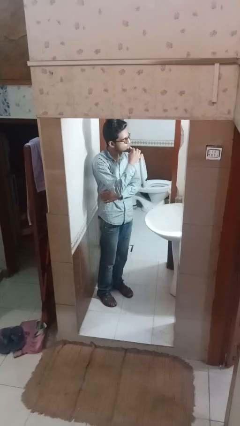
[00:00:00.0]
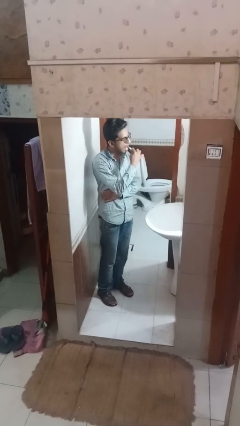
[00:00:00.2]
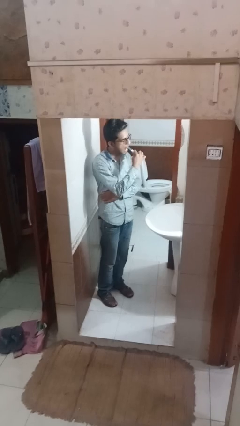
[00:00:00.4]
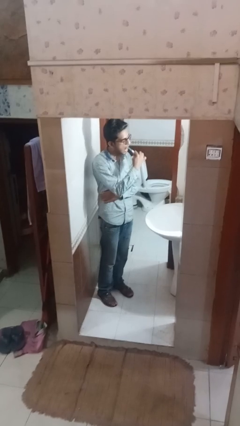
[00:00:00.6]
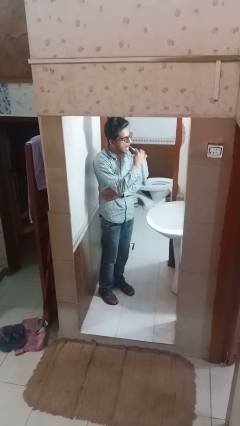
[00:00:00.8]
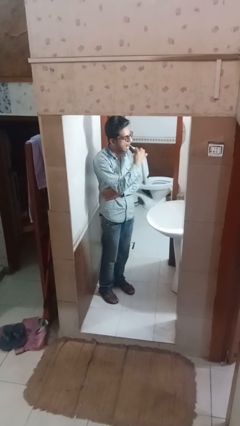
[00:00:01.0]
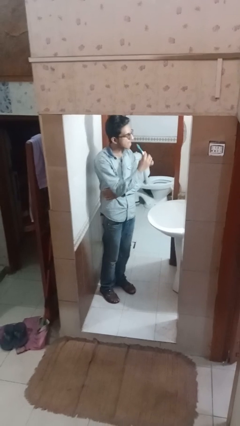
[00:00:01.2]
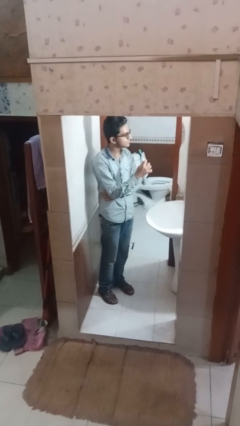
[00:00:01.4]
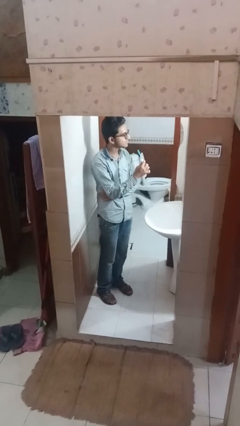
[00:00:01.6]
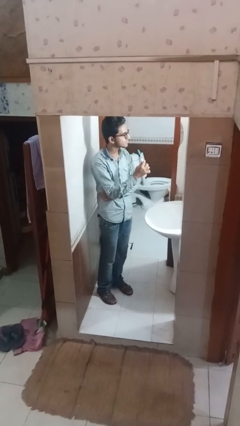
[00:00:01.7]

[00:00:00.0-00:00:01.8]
person brushes teeth

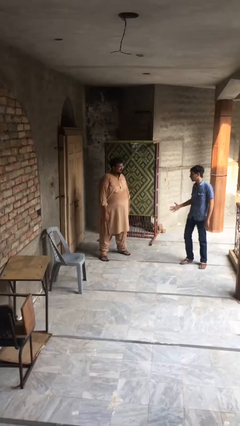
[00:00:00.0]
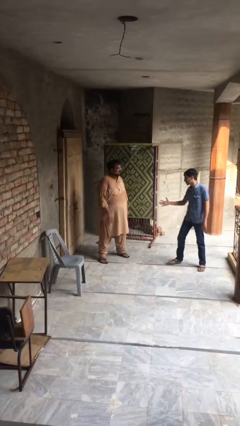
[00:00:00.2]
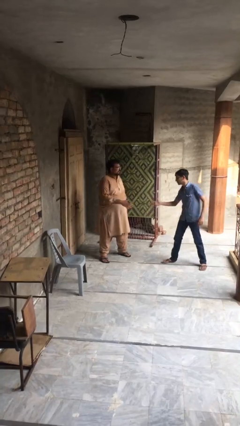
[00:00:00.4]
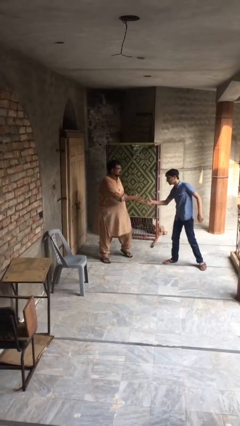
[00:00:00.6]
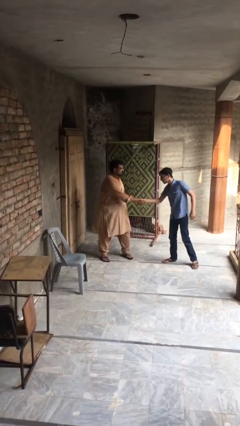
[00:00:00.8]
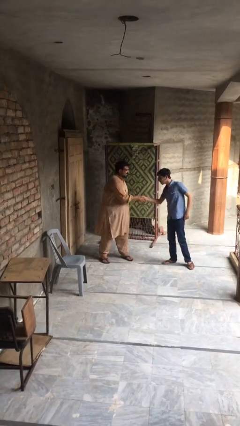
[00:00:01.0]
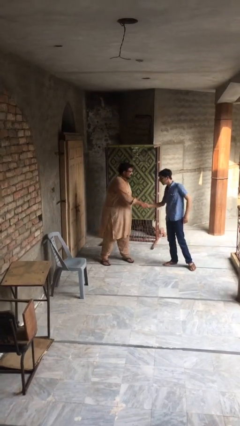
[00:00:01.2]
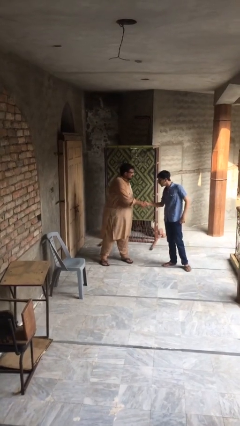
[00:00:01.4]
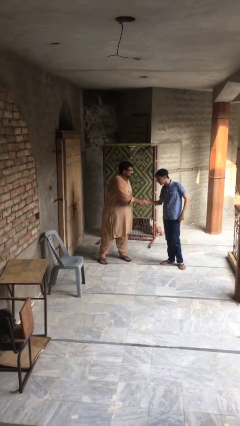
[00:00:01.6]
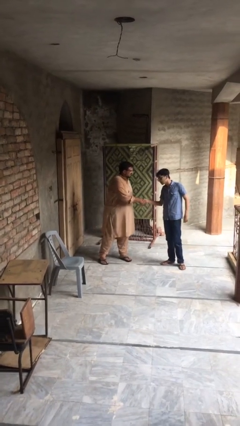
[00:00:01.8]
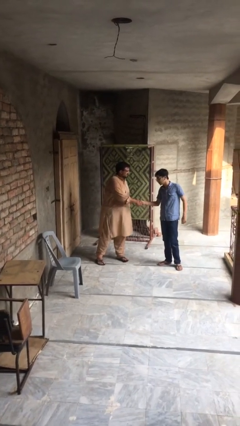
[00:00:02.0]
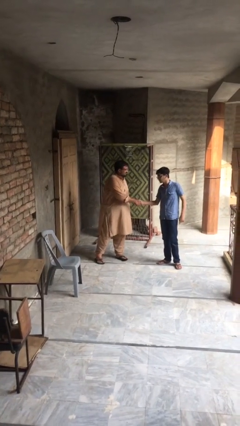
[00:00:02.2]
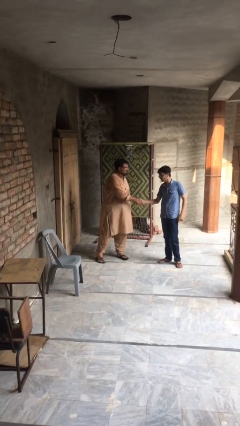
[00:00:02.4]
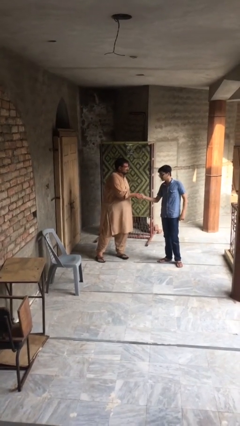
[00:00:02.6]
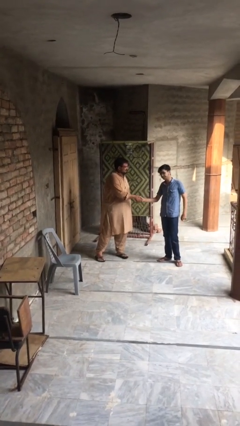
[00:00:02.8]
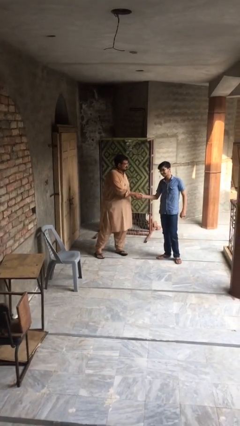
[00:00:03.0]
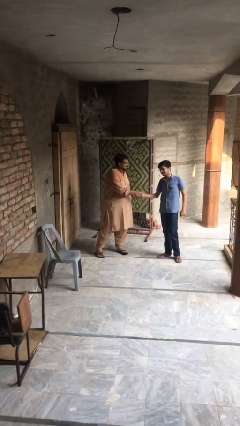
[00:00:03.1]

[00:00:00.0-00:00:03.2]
person shakes hand

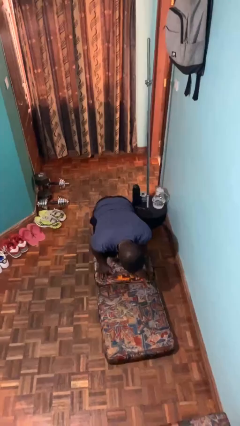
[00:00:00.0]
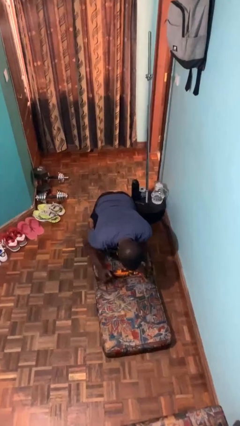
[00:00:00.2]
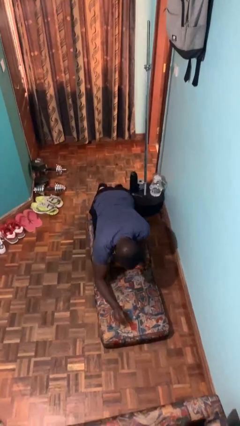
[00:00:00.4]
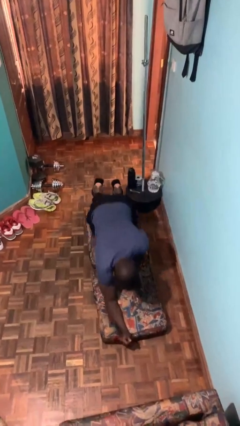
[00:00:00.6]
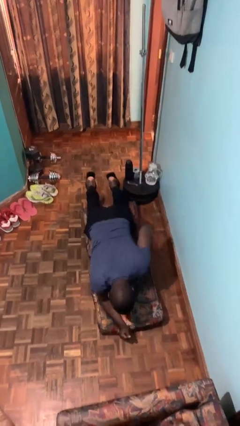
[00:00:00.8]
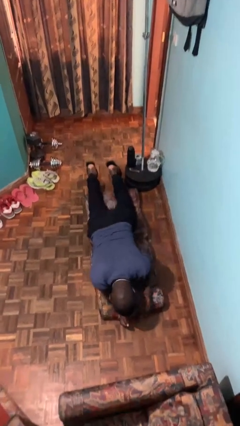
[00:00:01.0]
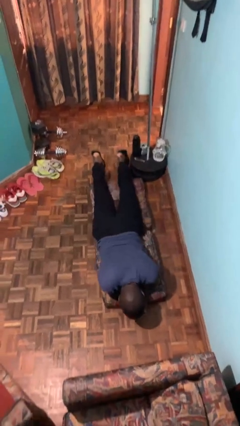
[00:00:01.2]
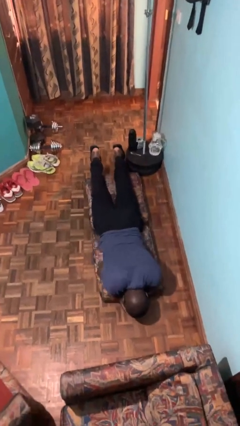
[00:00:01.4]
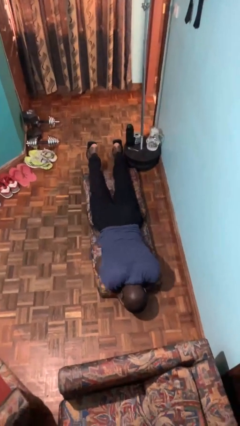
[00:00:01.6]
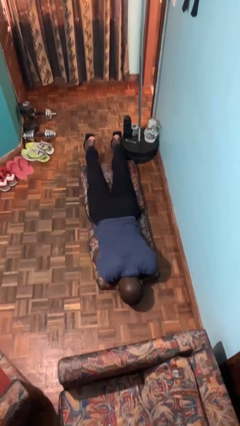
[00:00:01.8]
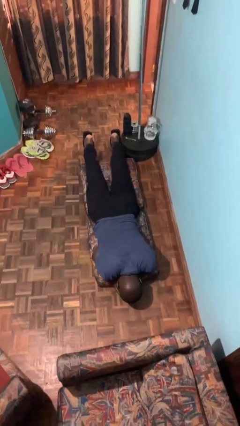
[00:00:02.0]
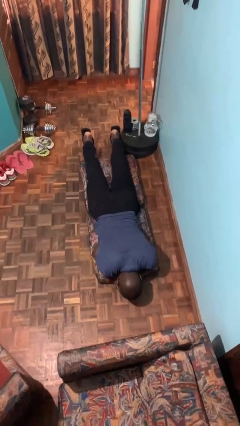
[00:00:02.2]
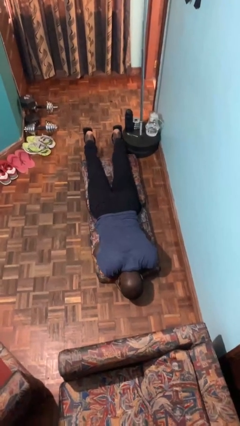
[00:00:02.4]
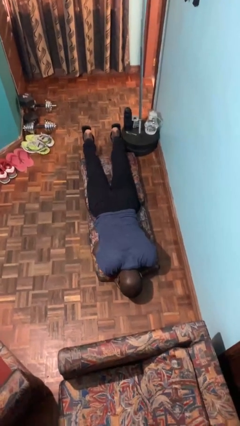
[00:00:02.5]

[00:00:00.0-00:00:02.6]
person lies down on floor

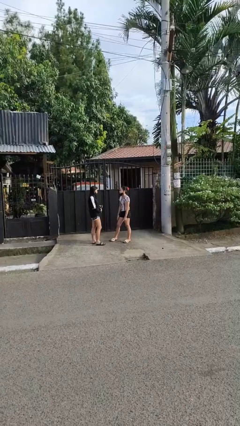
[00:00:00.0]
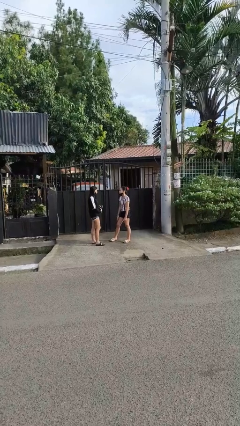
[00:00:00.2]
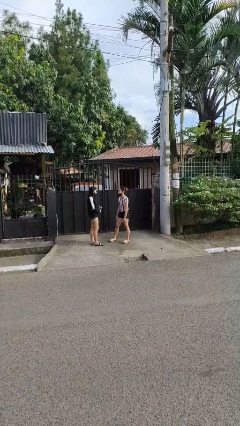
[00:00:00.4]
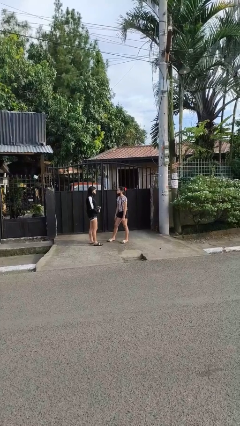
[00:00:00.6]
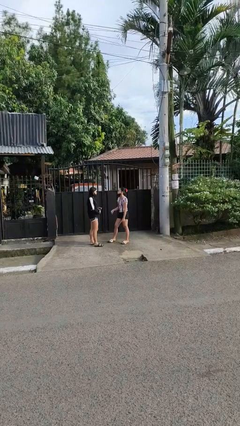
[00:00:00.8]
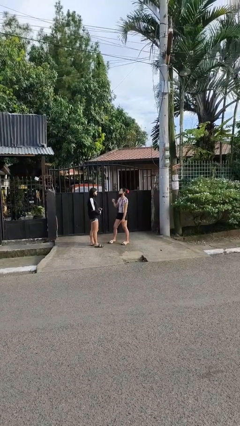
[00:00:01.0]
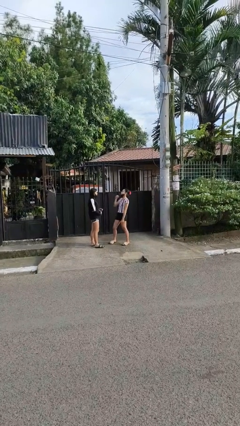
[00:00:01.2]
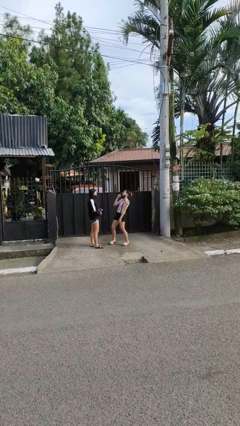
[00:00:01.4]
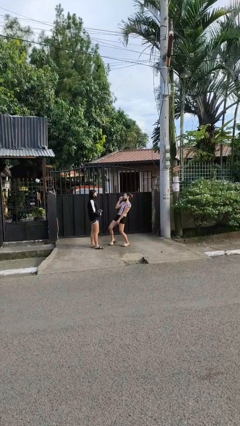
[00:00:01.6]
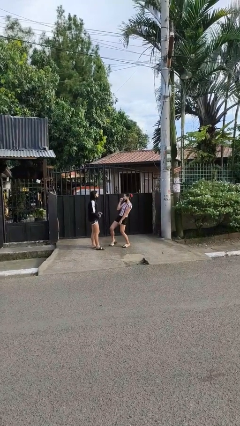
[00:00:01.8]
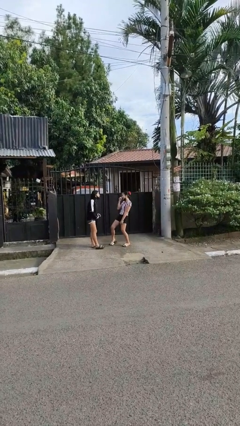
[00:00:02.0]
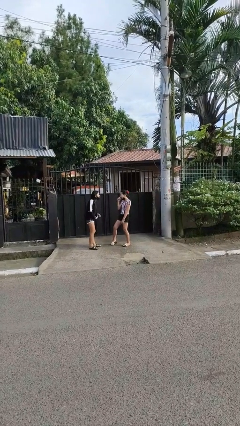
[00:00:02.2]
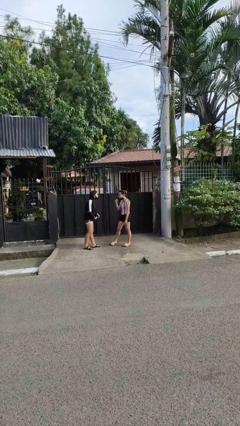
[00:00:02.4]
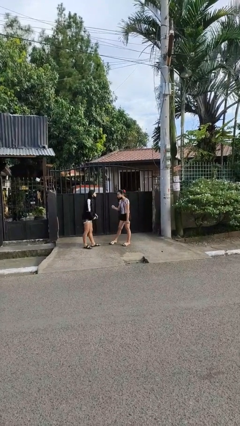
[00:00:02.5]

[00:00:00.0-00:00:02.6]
person laughs with person

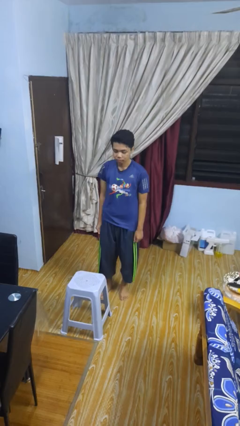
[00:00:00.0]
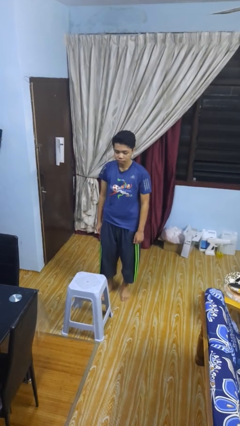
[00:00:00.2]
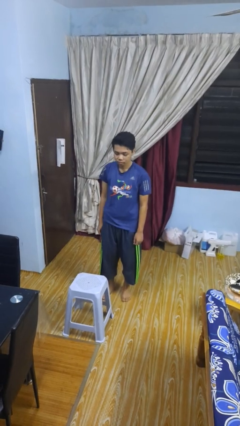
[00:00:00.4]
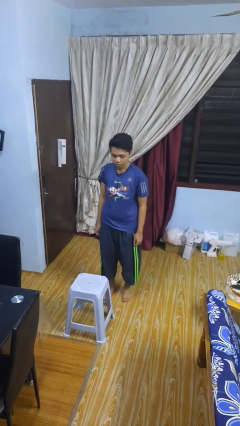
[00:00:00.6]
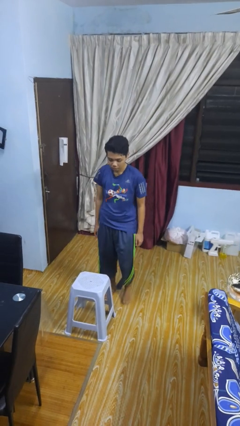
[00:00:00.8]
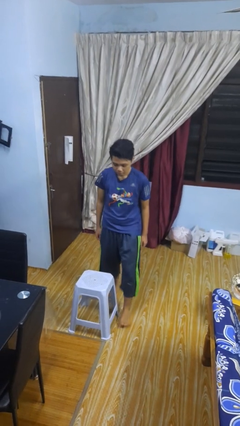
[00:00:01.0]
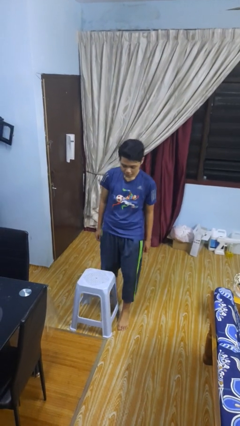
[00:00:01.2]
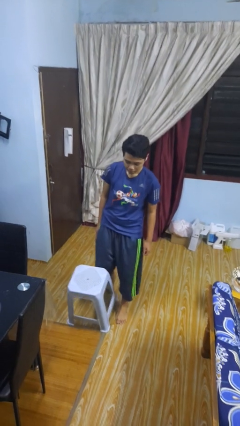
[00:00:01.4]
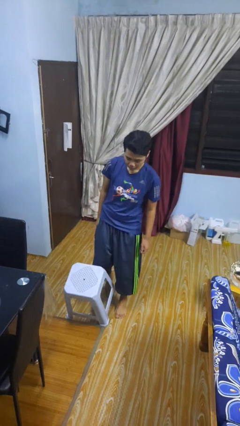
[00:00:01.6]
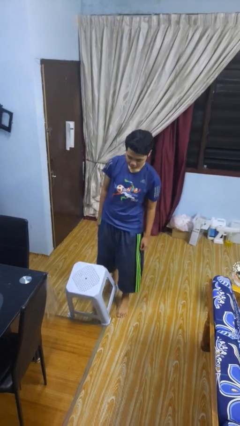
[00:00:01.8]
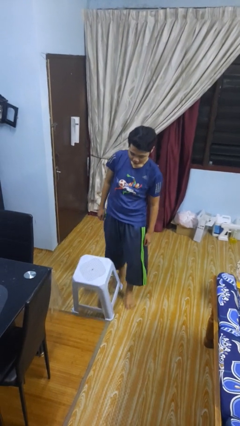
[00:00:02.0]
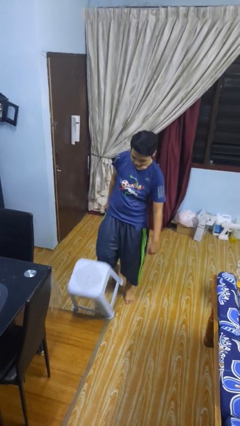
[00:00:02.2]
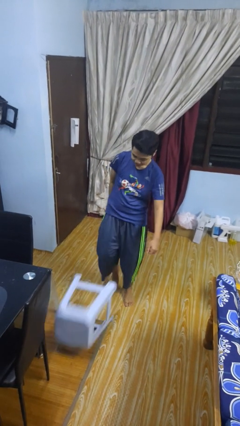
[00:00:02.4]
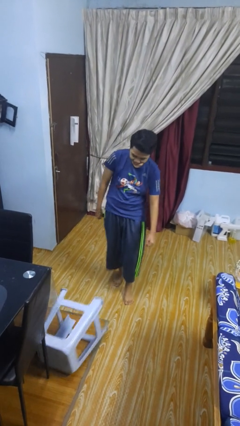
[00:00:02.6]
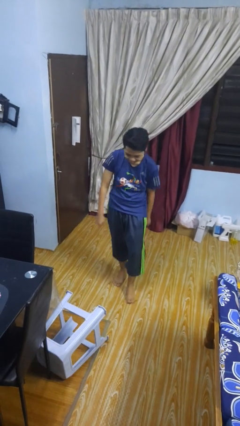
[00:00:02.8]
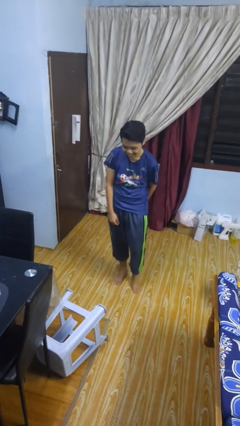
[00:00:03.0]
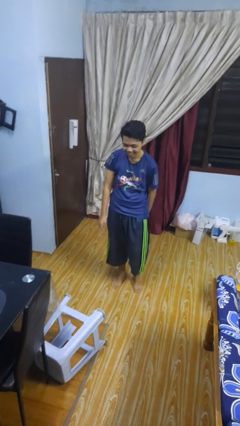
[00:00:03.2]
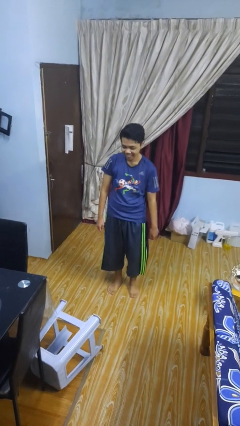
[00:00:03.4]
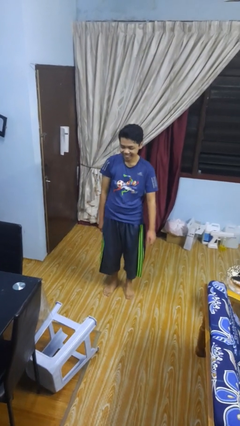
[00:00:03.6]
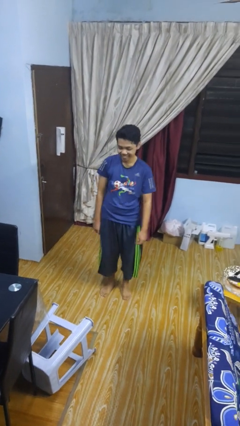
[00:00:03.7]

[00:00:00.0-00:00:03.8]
person knocks over furniture

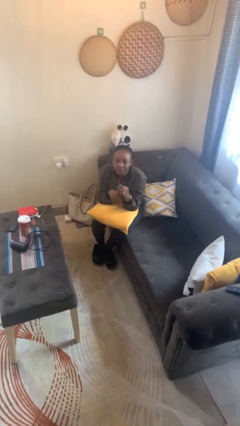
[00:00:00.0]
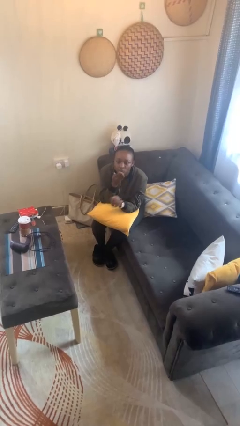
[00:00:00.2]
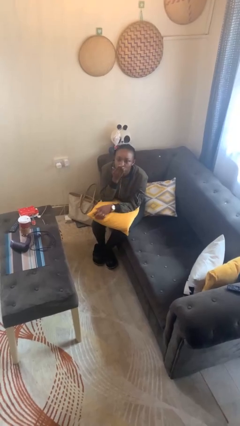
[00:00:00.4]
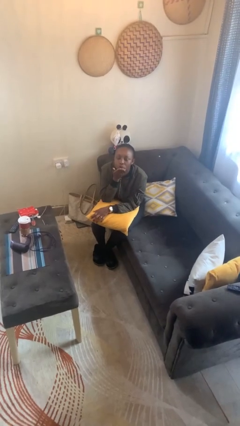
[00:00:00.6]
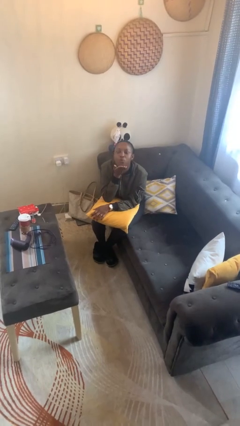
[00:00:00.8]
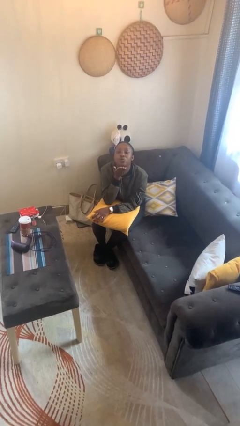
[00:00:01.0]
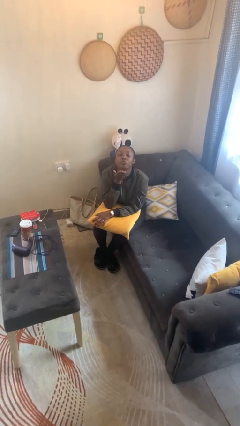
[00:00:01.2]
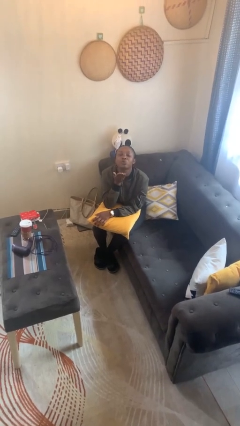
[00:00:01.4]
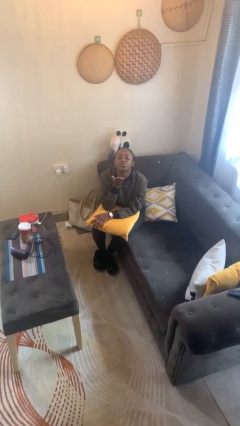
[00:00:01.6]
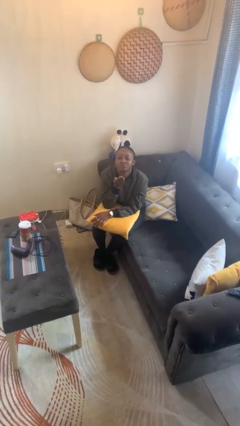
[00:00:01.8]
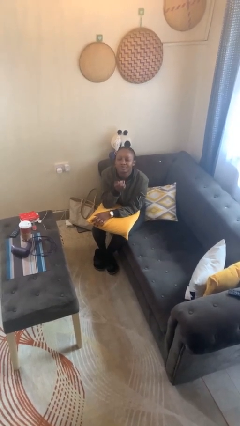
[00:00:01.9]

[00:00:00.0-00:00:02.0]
person gestures blow kiss

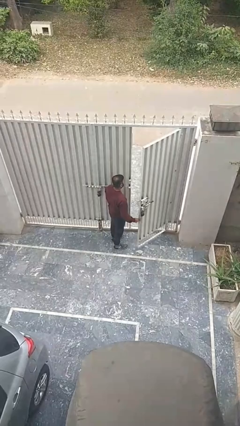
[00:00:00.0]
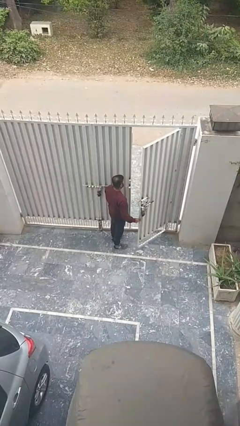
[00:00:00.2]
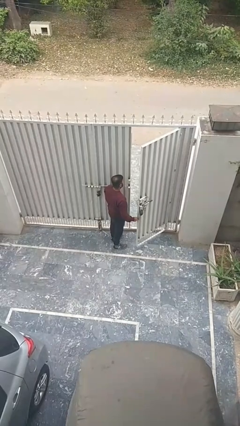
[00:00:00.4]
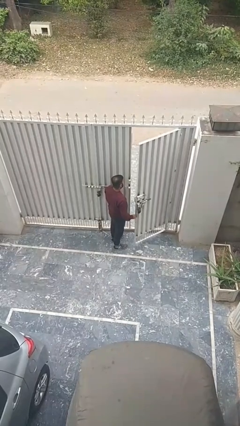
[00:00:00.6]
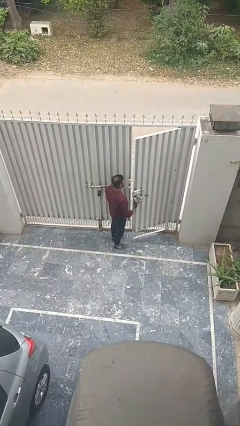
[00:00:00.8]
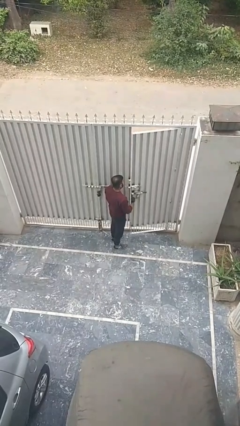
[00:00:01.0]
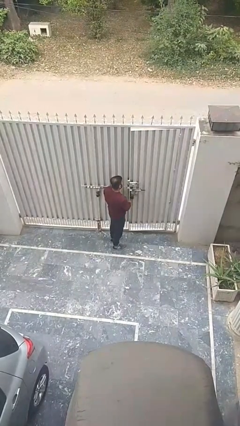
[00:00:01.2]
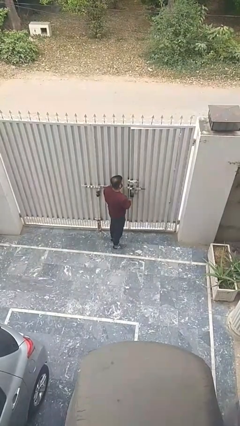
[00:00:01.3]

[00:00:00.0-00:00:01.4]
person closes facility door
